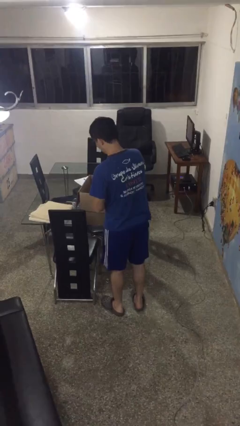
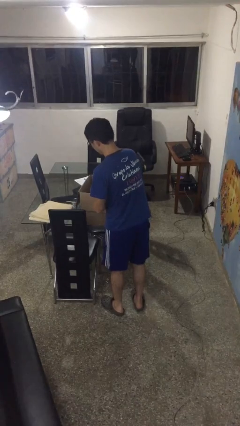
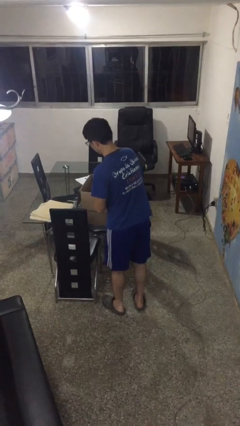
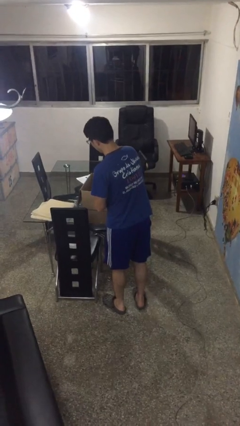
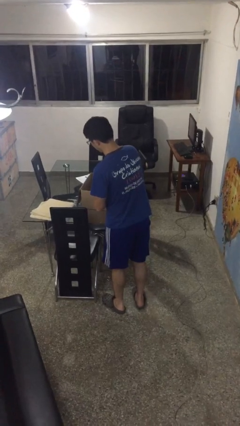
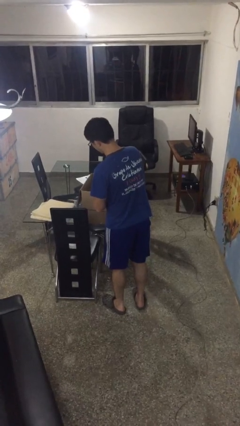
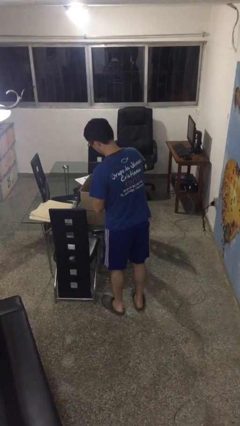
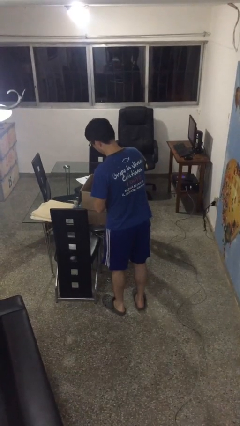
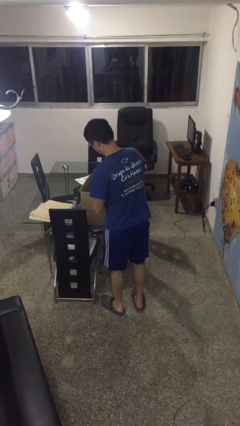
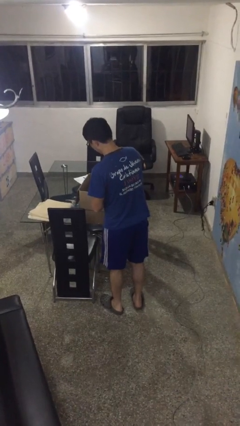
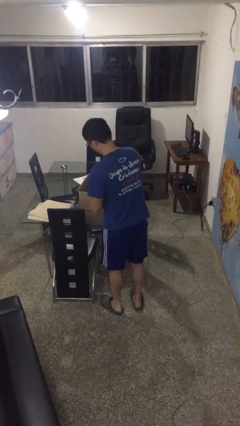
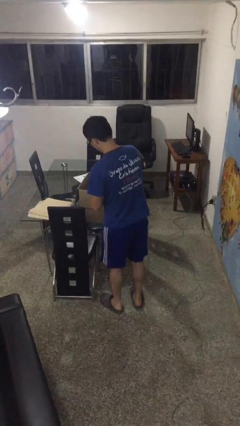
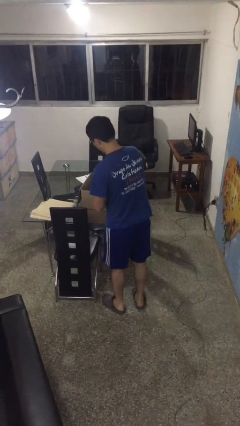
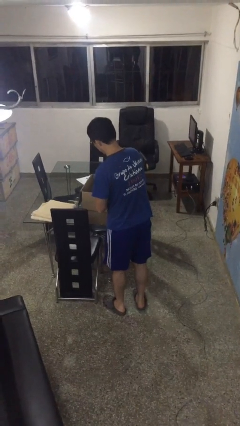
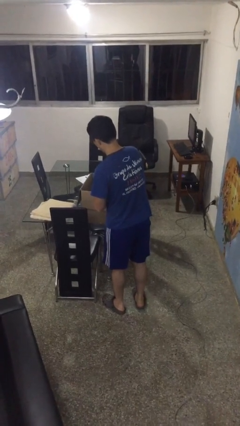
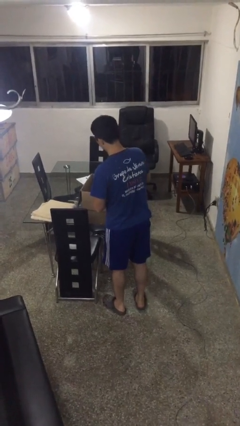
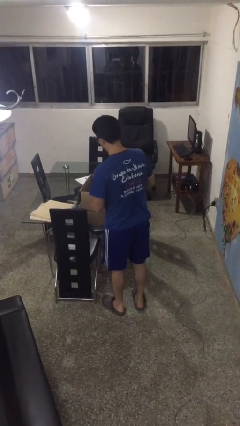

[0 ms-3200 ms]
person searches in box

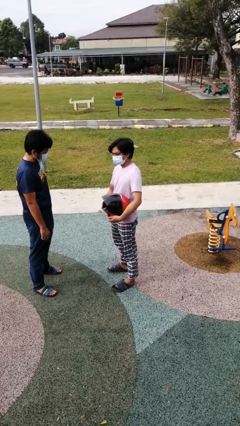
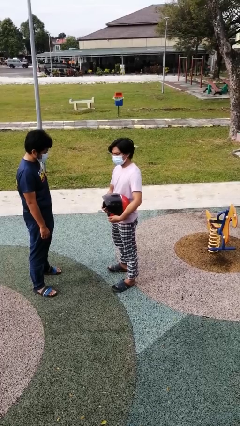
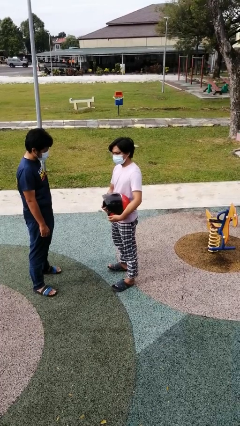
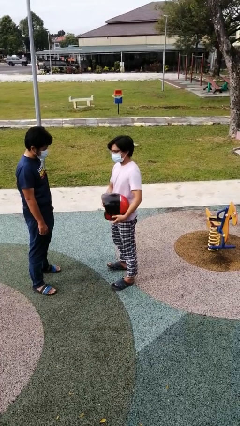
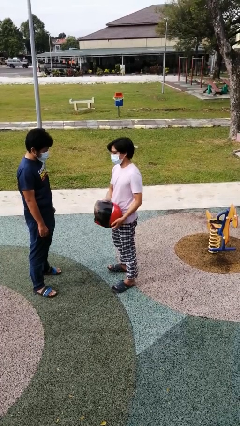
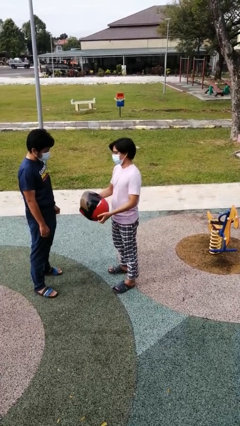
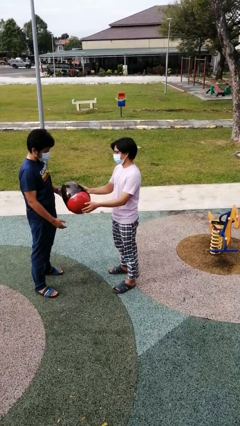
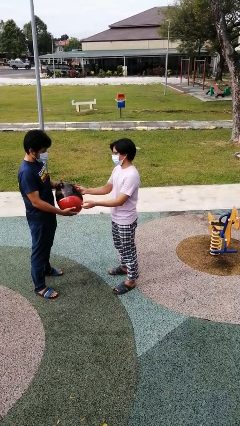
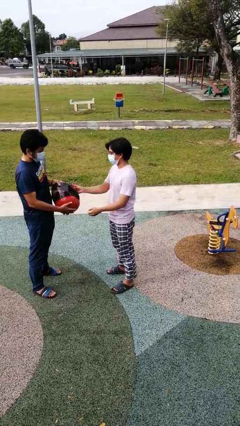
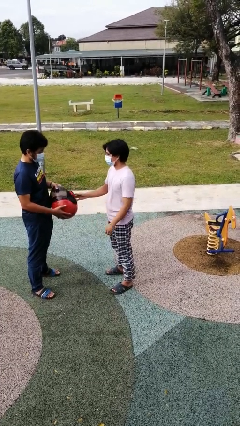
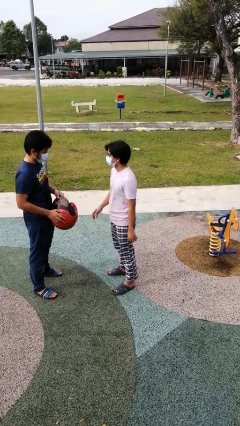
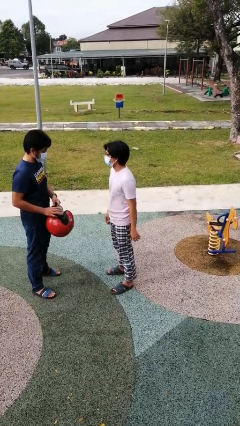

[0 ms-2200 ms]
person transfers object to person

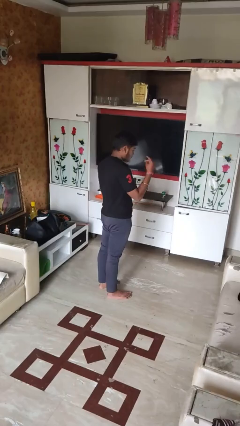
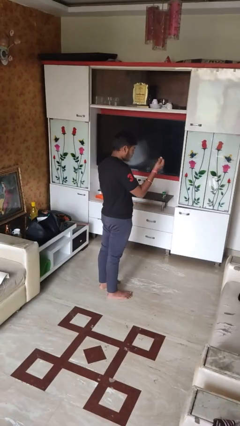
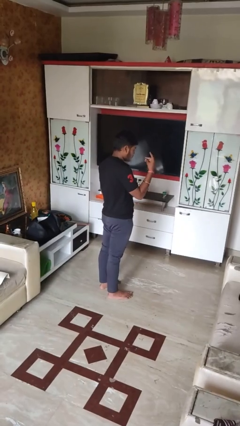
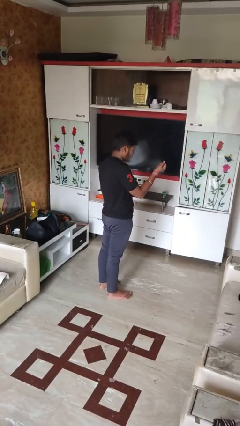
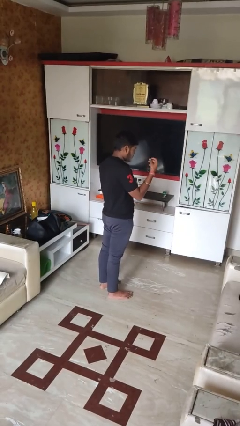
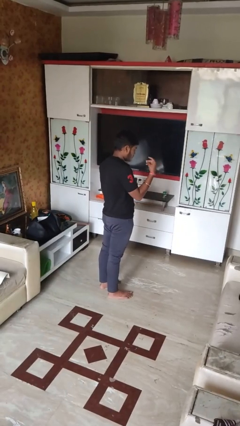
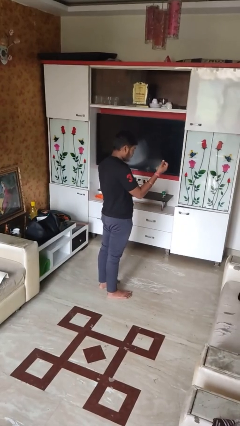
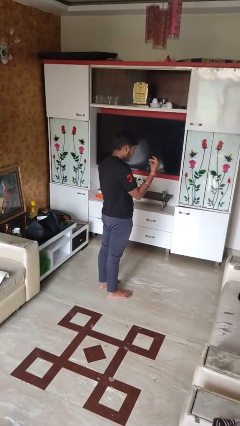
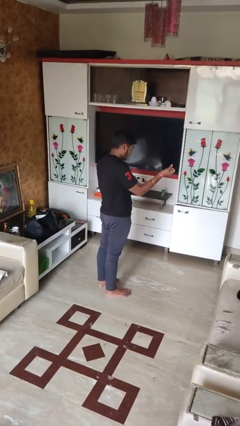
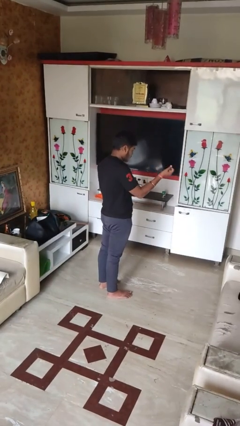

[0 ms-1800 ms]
person snaps fingers

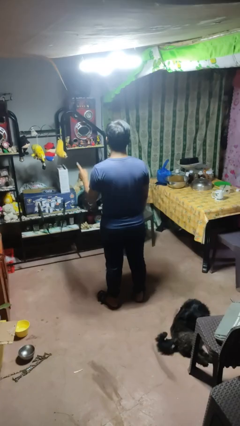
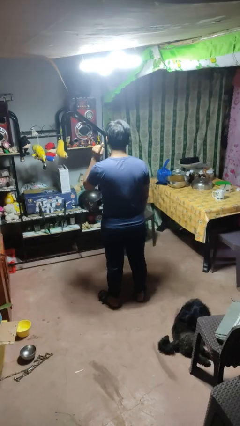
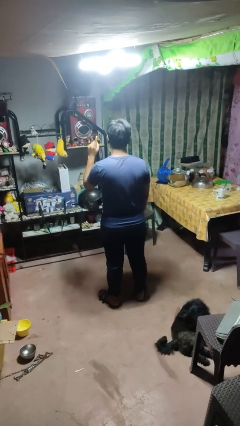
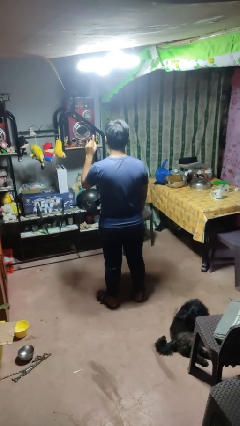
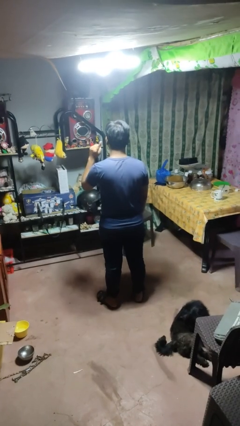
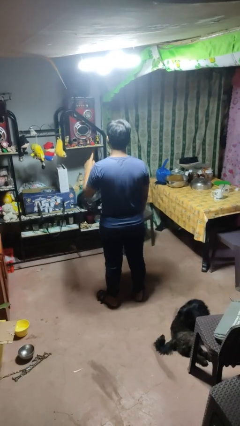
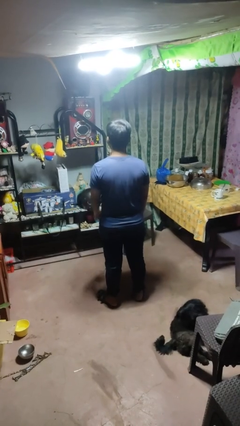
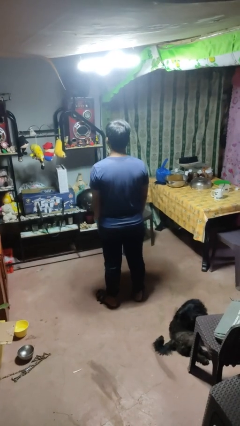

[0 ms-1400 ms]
person gestures listen closely

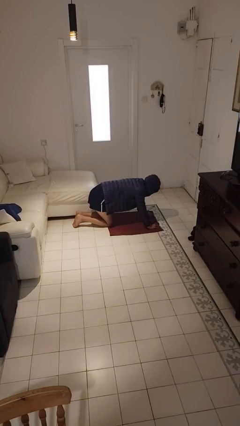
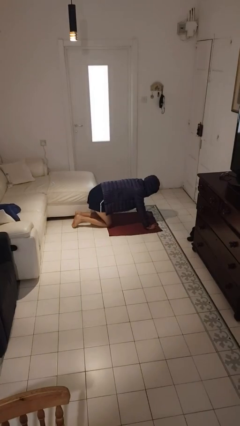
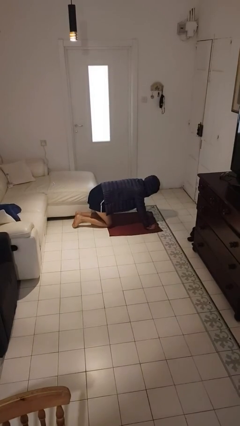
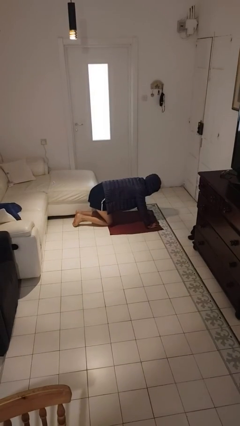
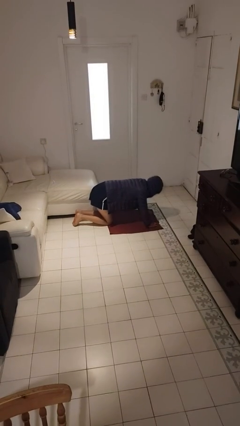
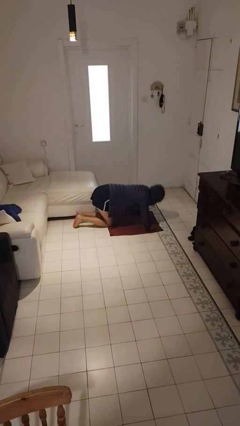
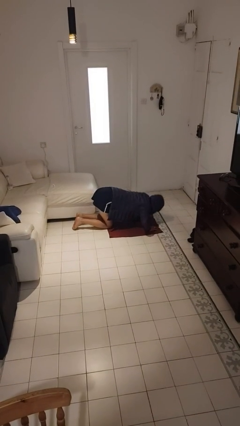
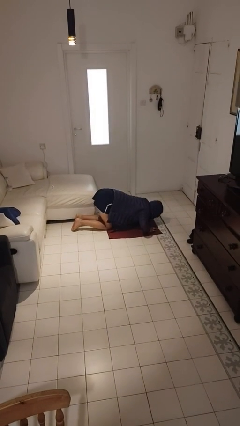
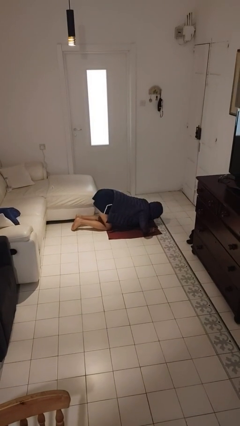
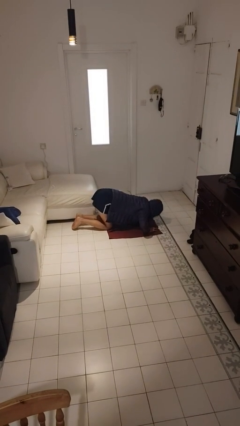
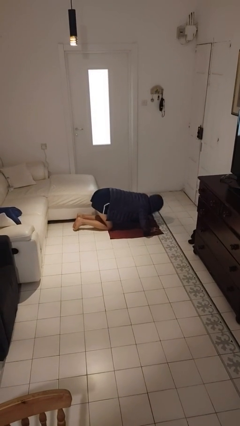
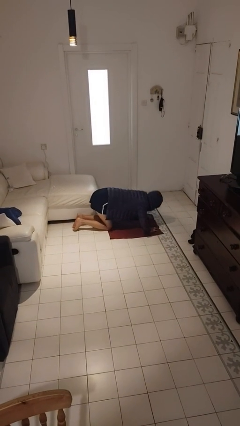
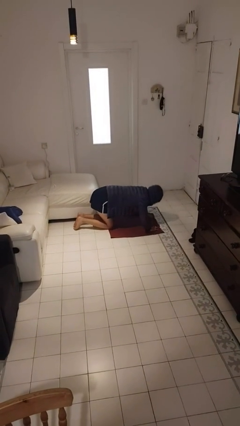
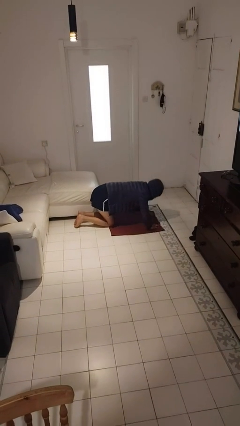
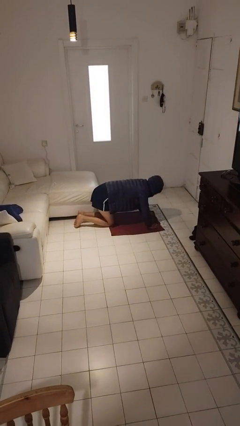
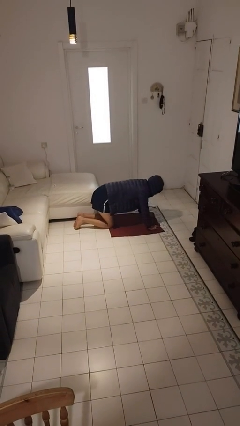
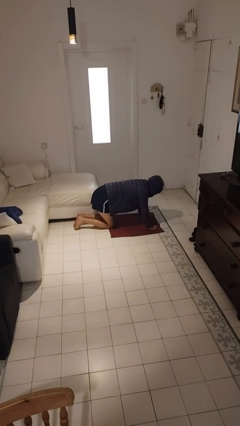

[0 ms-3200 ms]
person exercises with pushup

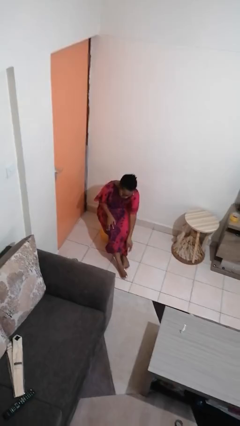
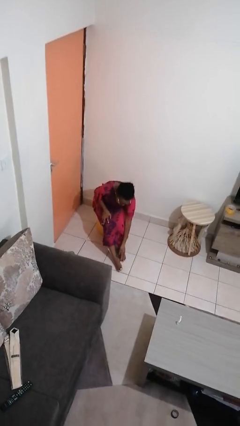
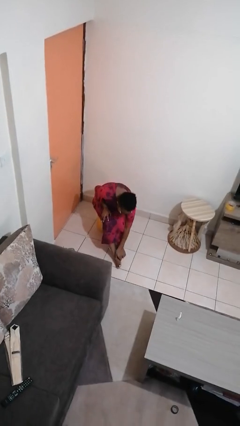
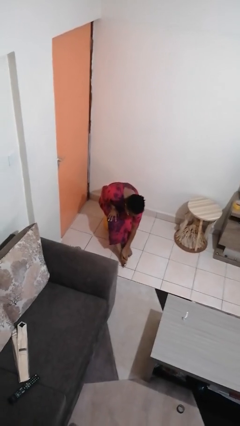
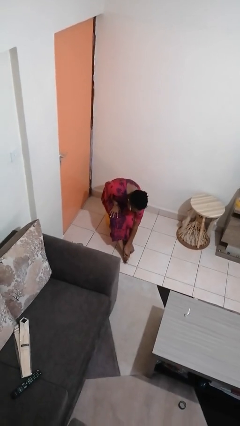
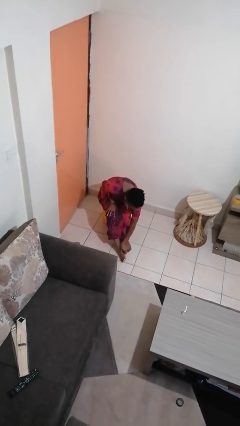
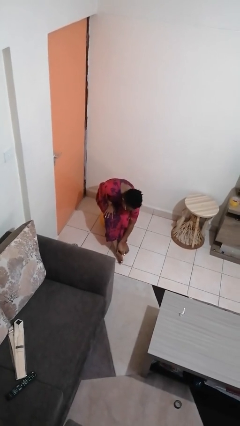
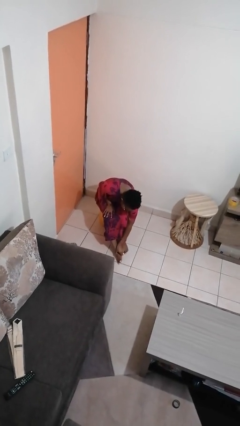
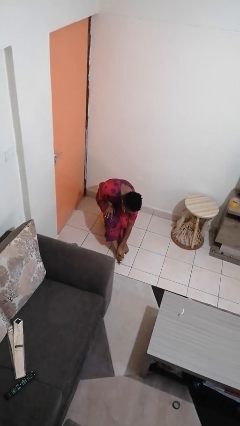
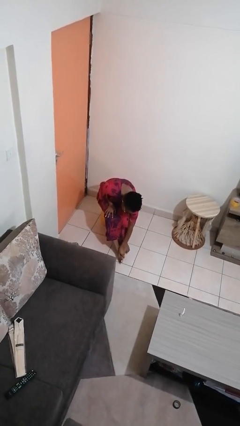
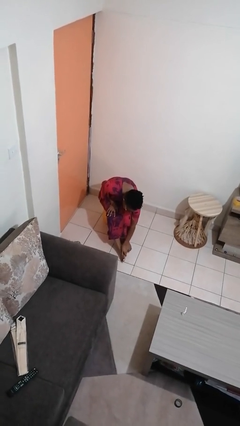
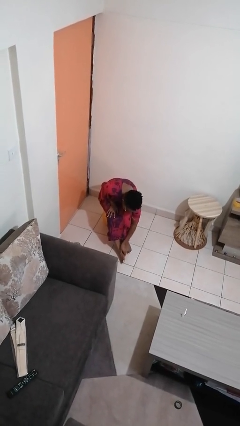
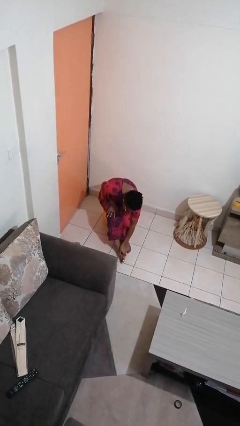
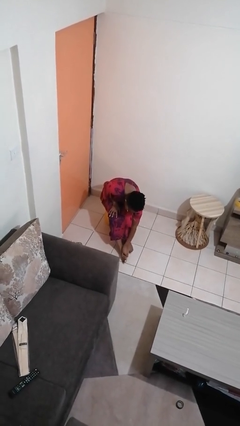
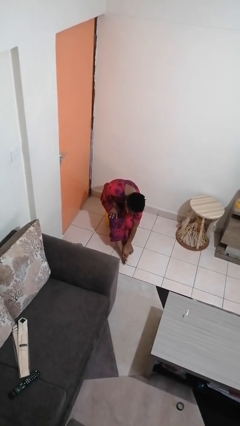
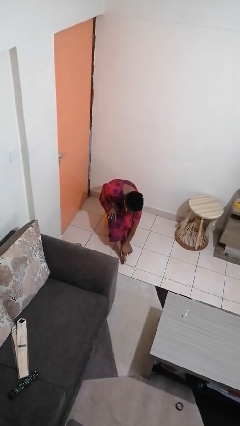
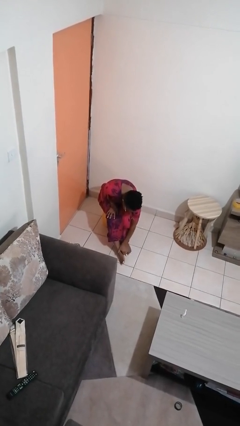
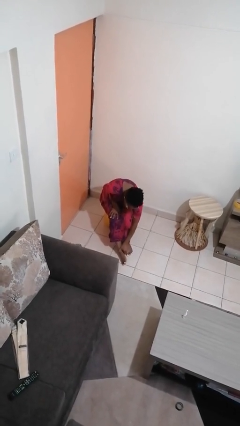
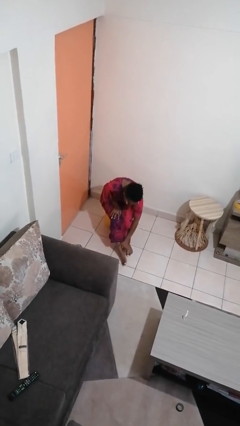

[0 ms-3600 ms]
person rubs foot

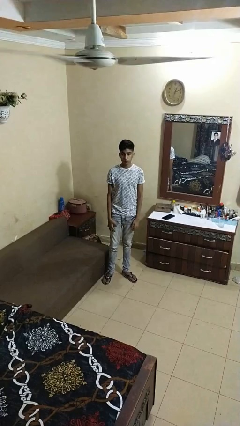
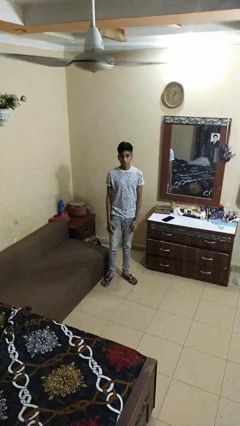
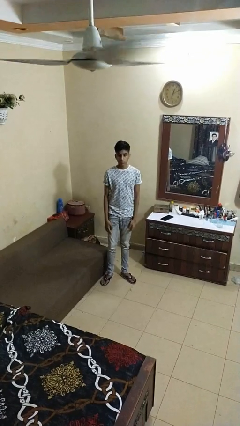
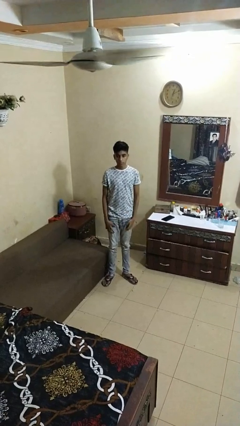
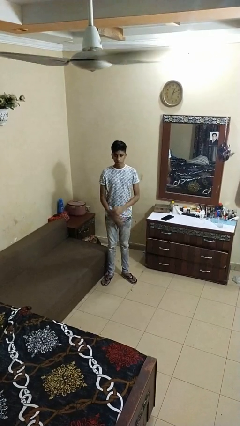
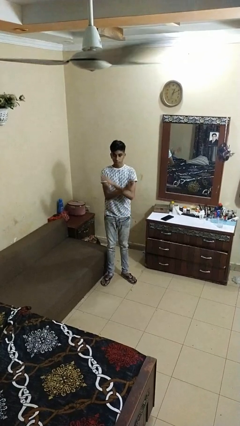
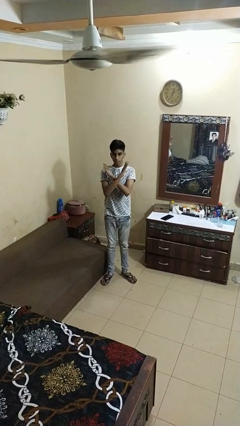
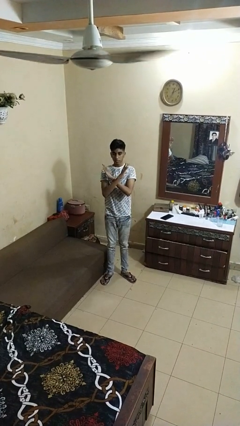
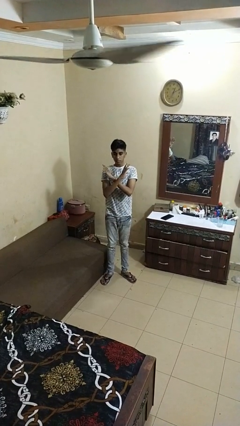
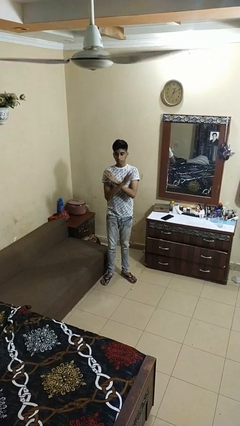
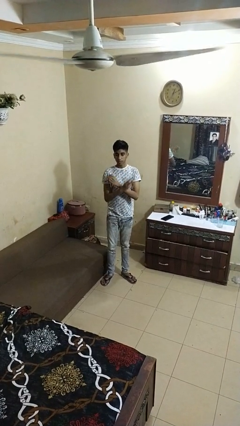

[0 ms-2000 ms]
person gestures arms x
